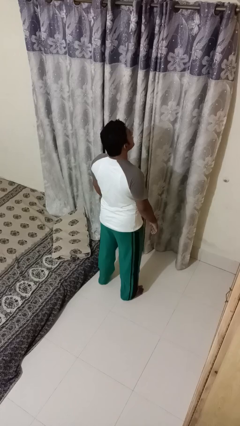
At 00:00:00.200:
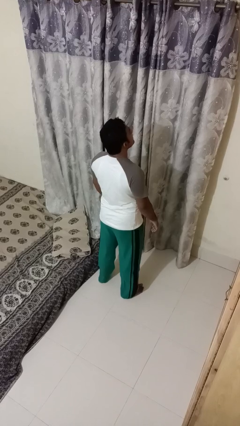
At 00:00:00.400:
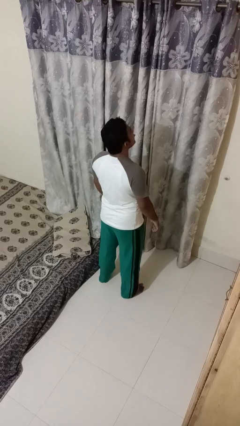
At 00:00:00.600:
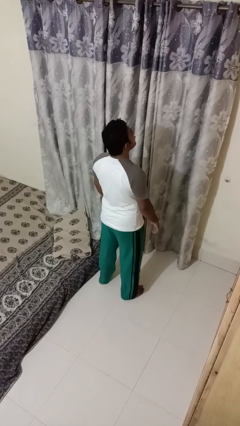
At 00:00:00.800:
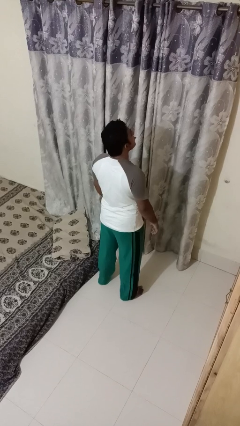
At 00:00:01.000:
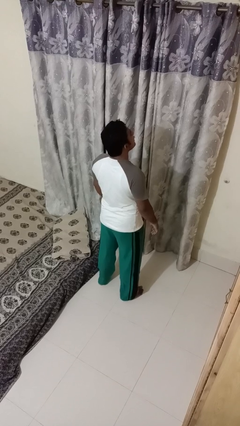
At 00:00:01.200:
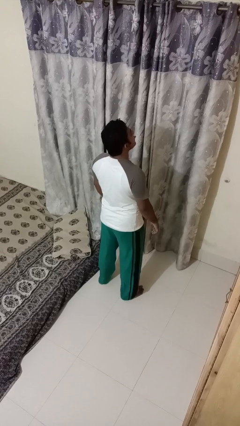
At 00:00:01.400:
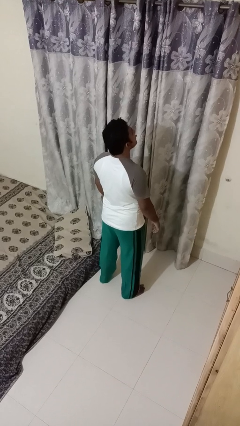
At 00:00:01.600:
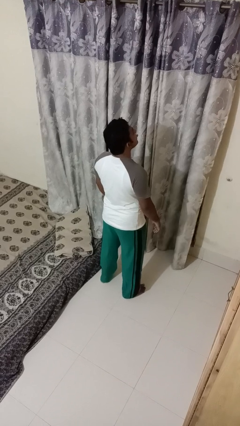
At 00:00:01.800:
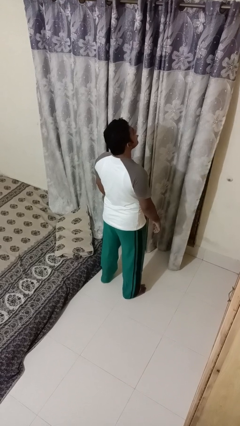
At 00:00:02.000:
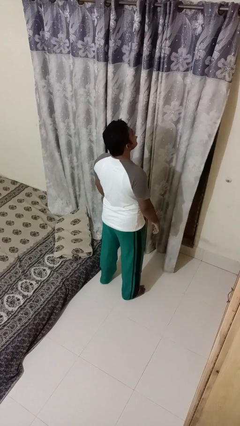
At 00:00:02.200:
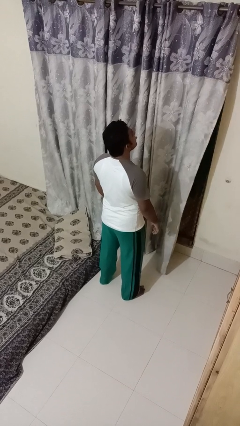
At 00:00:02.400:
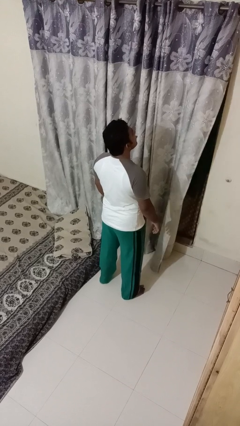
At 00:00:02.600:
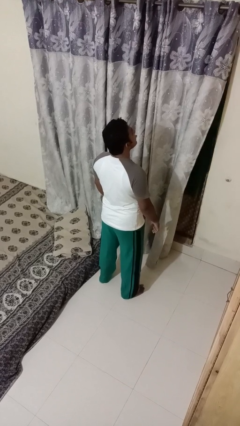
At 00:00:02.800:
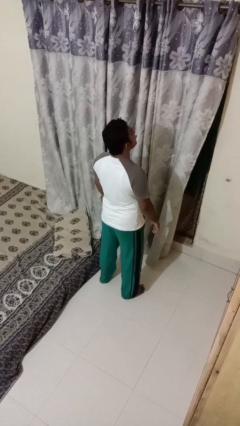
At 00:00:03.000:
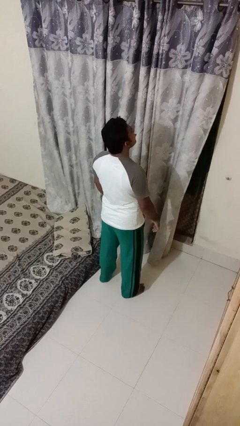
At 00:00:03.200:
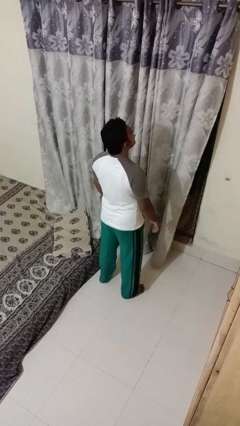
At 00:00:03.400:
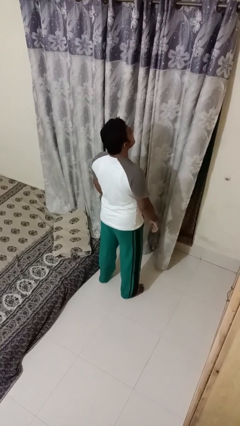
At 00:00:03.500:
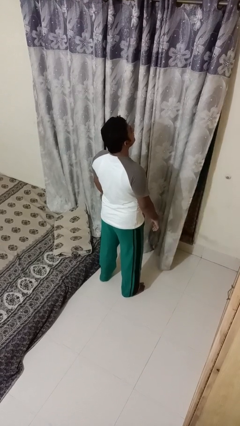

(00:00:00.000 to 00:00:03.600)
person sticks out tongue

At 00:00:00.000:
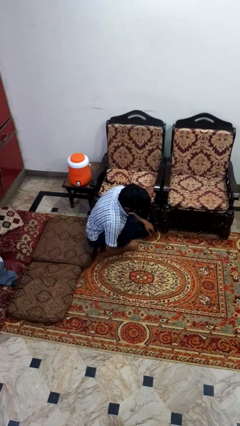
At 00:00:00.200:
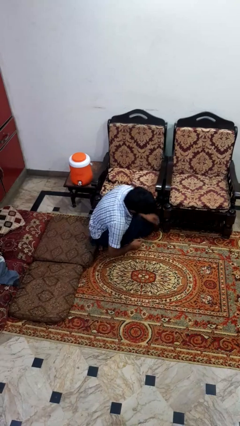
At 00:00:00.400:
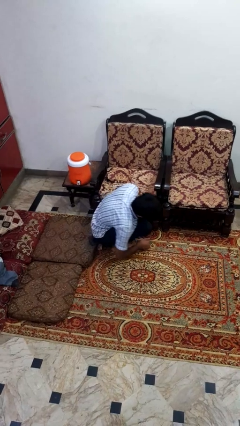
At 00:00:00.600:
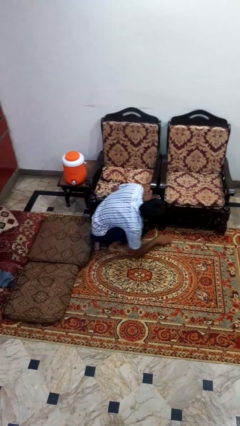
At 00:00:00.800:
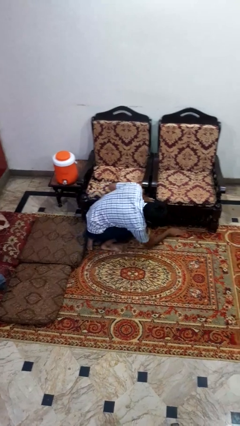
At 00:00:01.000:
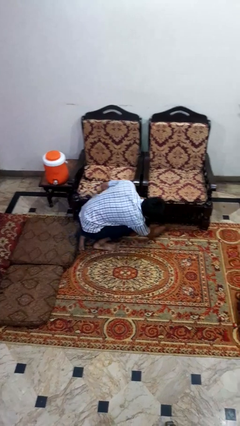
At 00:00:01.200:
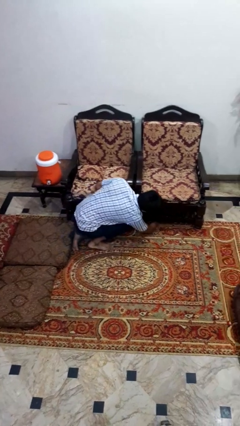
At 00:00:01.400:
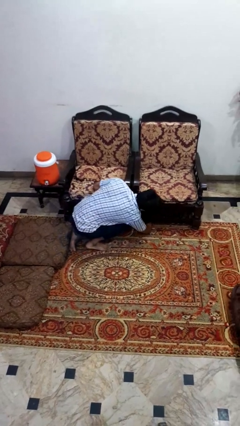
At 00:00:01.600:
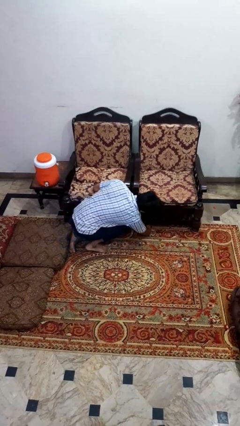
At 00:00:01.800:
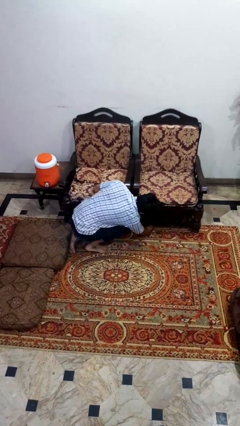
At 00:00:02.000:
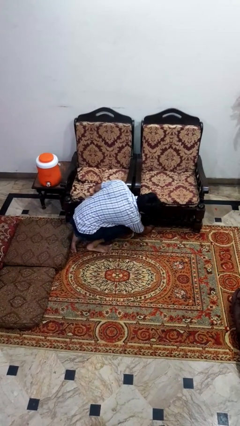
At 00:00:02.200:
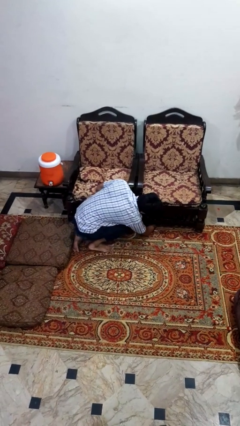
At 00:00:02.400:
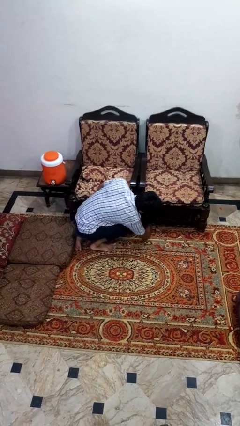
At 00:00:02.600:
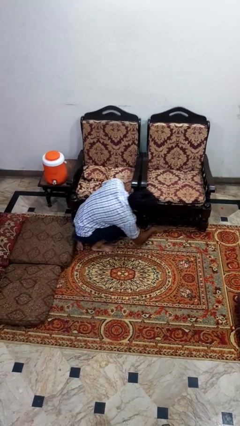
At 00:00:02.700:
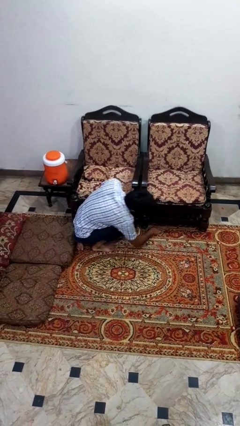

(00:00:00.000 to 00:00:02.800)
person searches under couch

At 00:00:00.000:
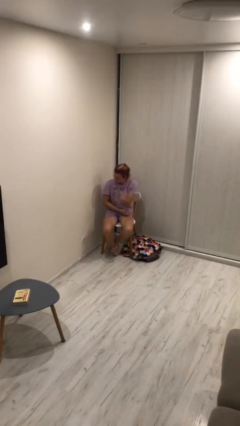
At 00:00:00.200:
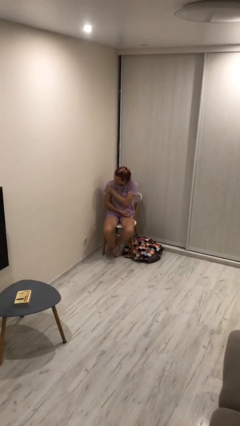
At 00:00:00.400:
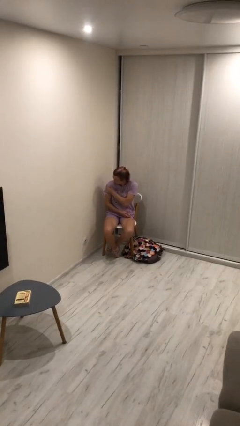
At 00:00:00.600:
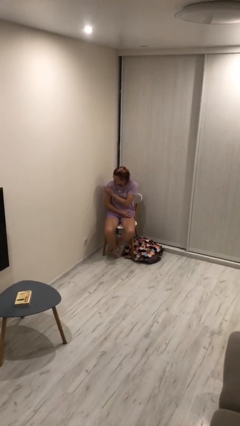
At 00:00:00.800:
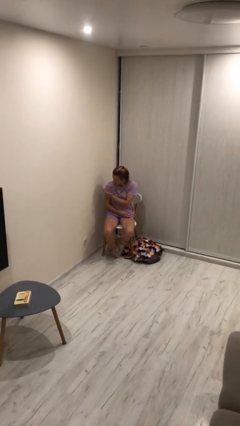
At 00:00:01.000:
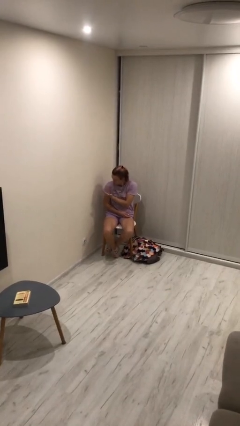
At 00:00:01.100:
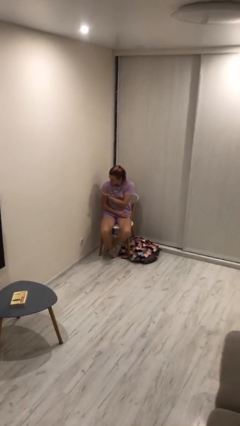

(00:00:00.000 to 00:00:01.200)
person swats bug

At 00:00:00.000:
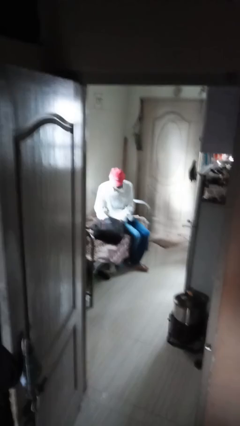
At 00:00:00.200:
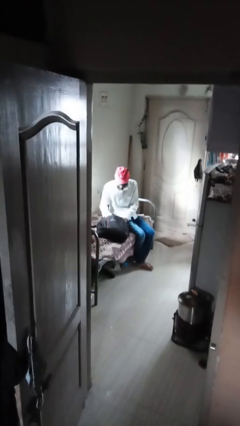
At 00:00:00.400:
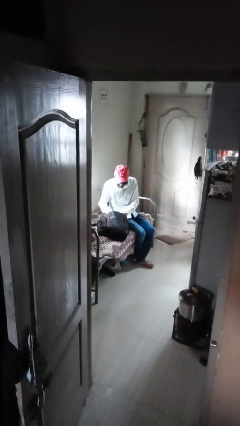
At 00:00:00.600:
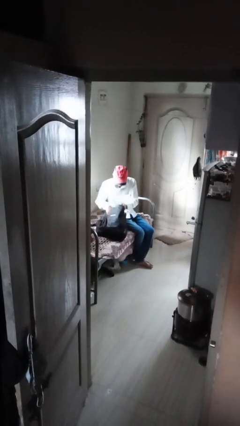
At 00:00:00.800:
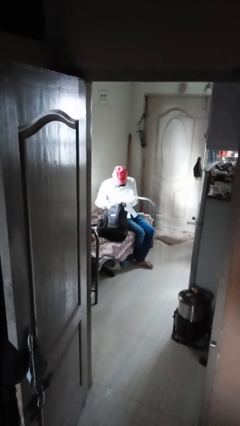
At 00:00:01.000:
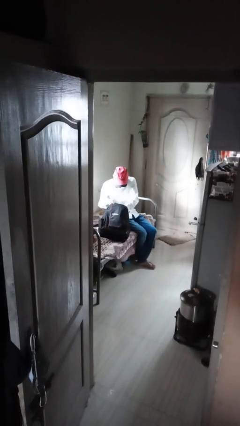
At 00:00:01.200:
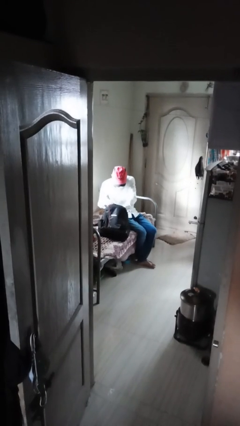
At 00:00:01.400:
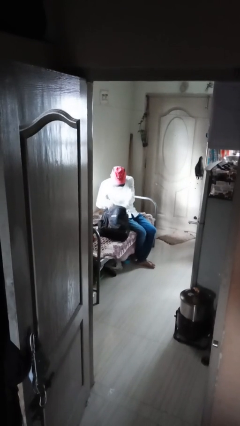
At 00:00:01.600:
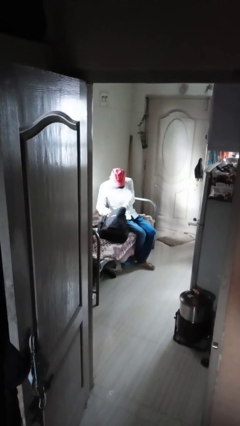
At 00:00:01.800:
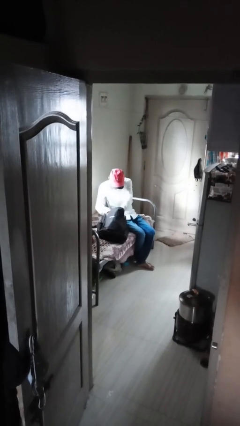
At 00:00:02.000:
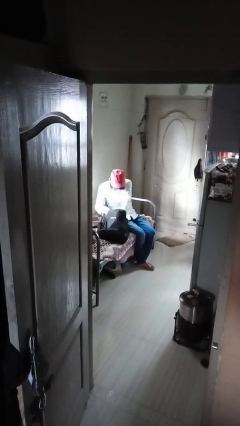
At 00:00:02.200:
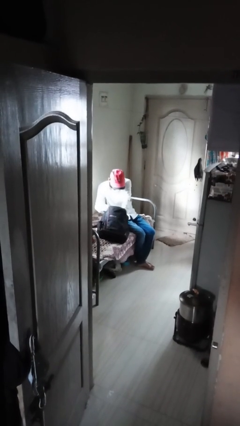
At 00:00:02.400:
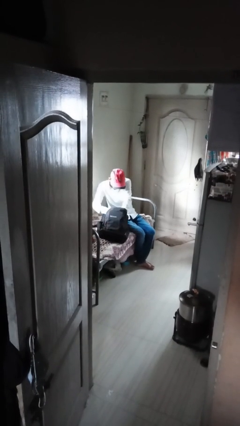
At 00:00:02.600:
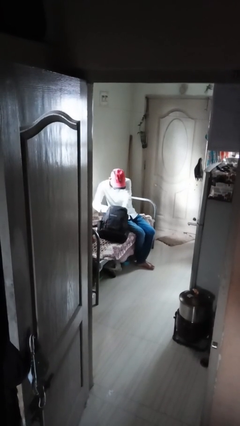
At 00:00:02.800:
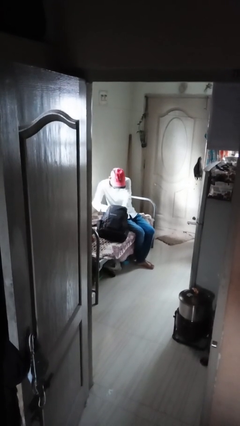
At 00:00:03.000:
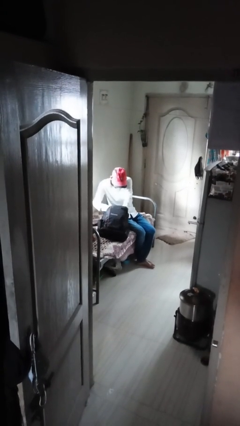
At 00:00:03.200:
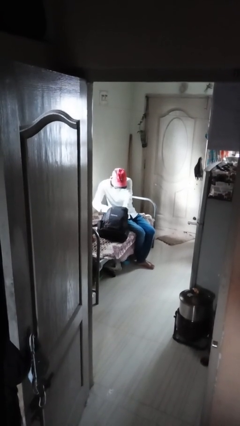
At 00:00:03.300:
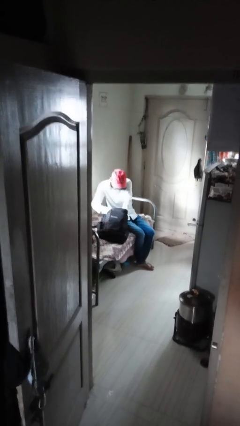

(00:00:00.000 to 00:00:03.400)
person searches in backpack

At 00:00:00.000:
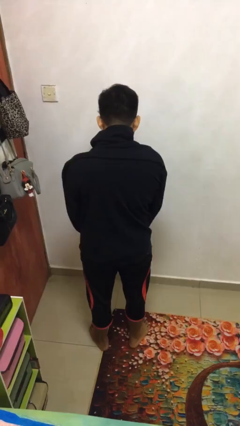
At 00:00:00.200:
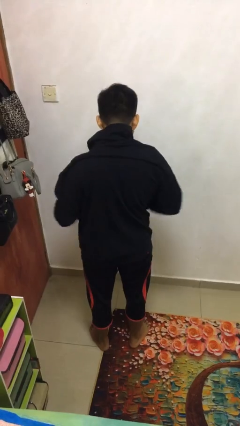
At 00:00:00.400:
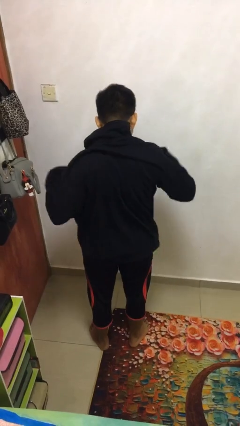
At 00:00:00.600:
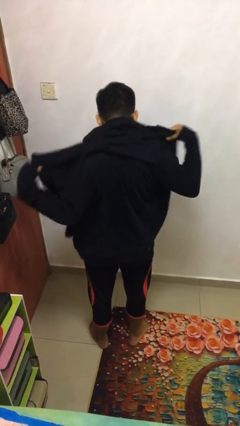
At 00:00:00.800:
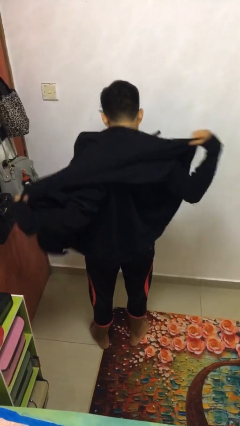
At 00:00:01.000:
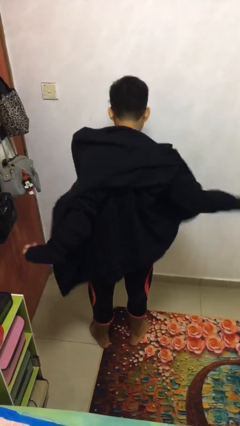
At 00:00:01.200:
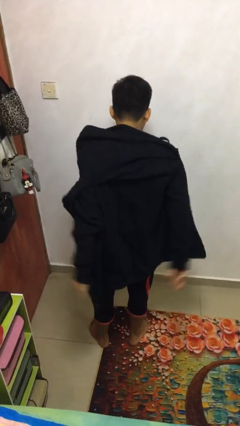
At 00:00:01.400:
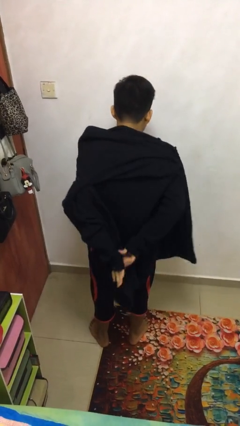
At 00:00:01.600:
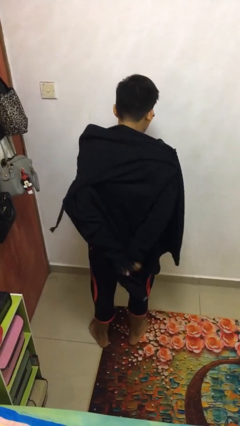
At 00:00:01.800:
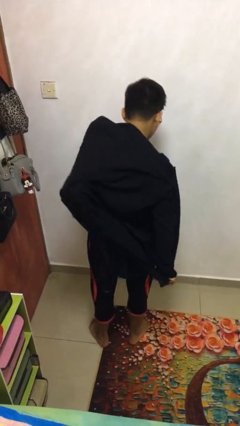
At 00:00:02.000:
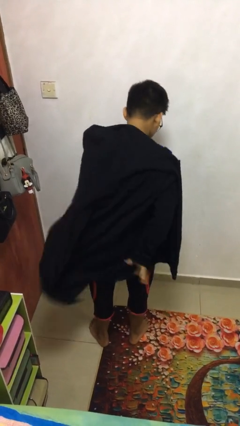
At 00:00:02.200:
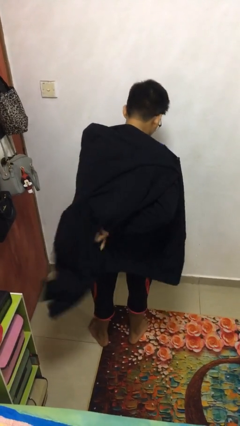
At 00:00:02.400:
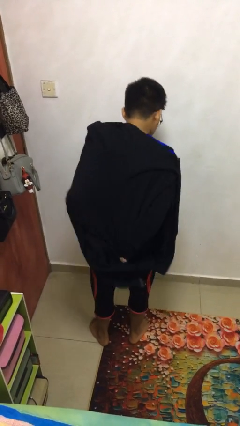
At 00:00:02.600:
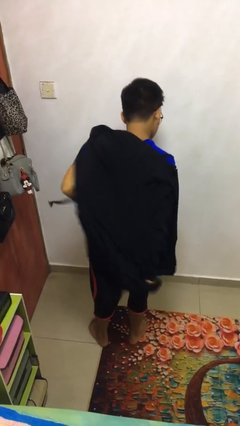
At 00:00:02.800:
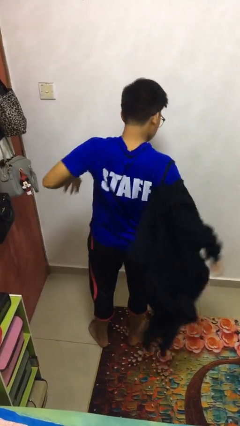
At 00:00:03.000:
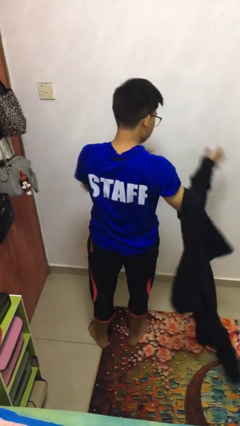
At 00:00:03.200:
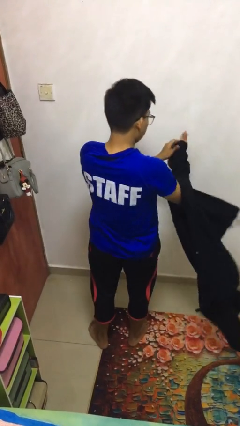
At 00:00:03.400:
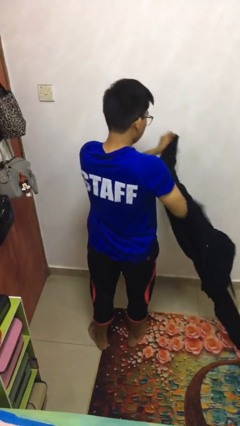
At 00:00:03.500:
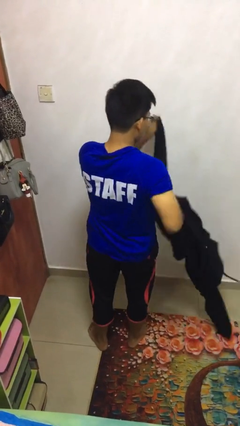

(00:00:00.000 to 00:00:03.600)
person takes off jacket

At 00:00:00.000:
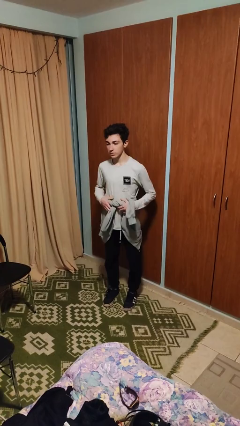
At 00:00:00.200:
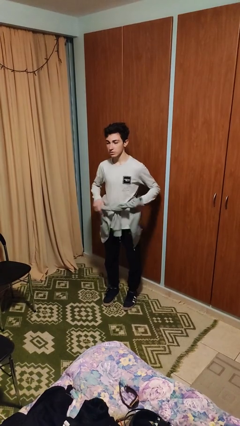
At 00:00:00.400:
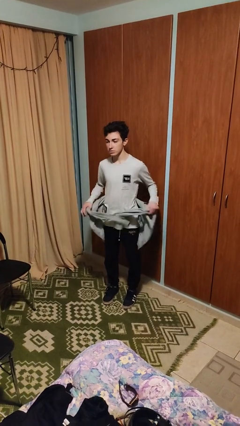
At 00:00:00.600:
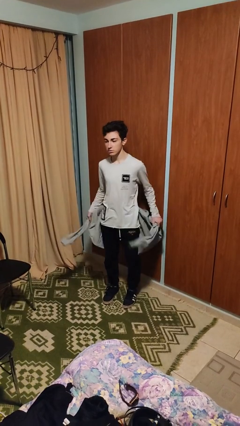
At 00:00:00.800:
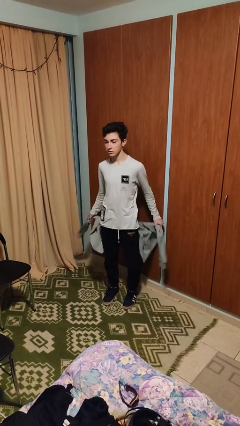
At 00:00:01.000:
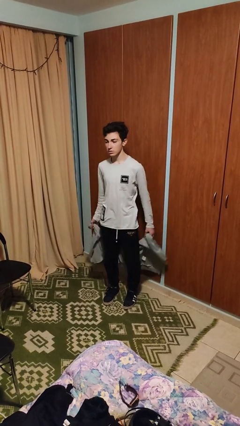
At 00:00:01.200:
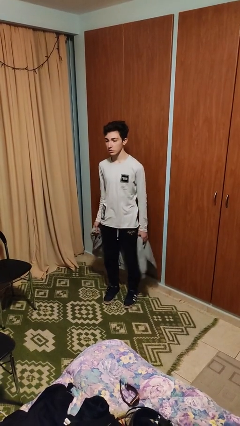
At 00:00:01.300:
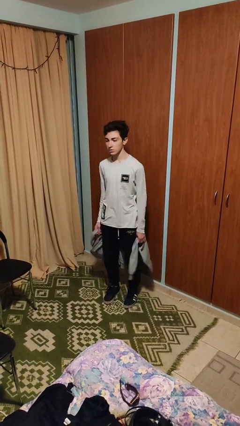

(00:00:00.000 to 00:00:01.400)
person unties jacket around waist

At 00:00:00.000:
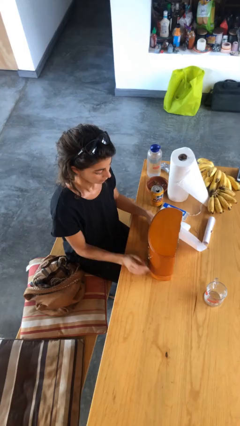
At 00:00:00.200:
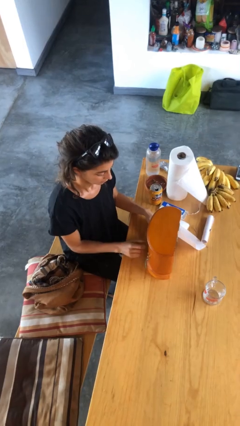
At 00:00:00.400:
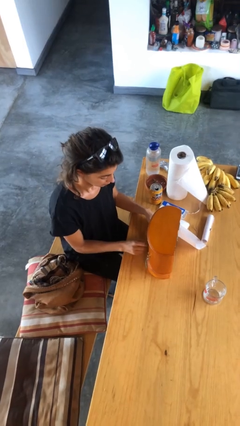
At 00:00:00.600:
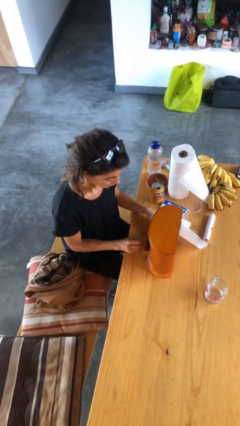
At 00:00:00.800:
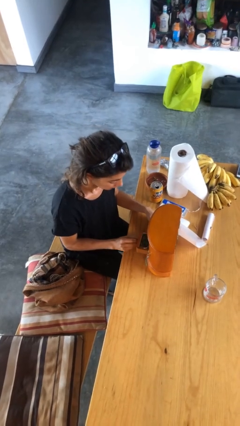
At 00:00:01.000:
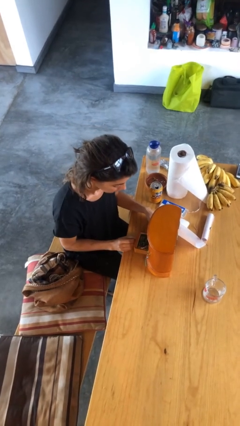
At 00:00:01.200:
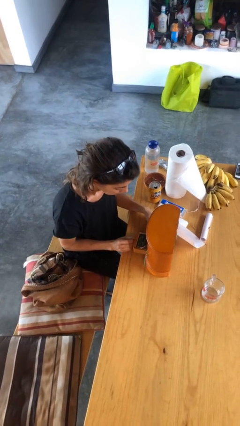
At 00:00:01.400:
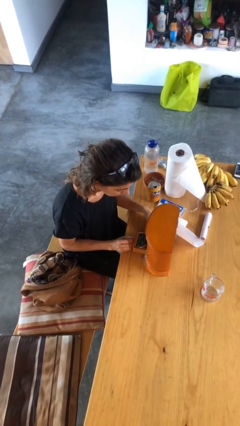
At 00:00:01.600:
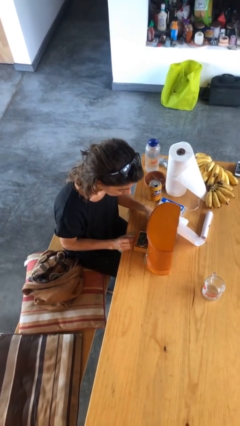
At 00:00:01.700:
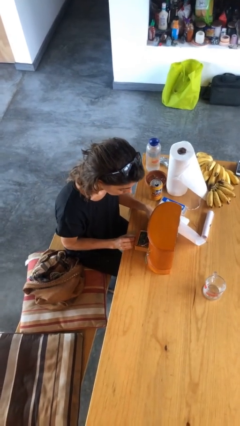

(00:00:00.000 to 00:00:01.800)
person opens jewelry box
